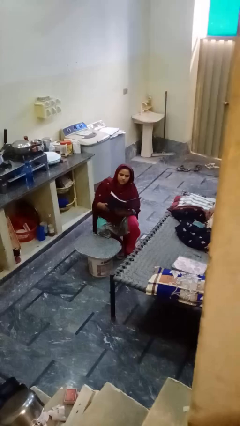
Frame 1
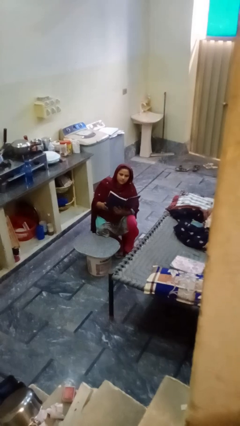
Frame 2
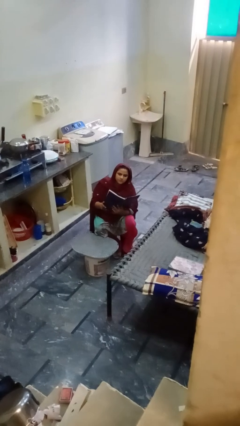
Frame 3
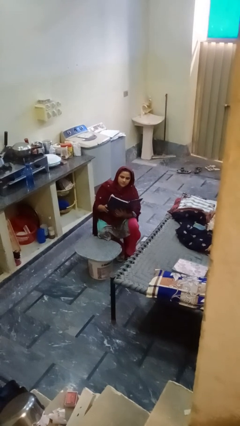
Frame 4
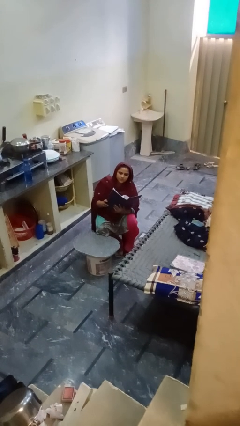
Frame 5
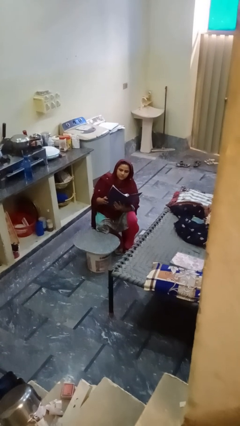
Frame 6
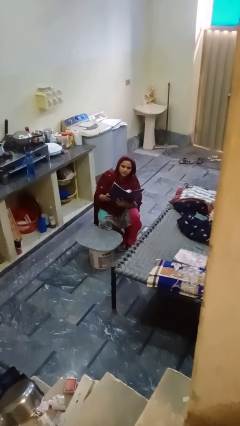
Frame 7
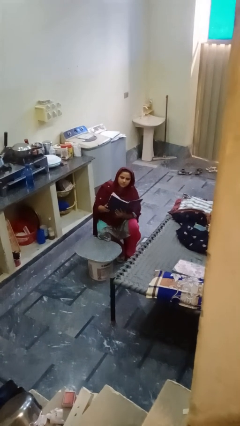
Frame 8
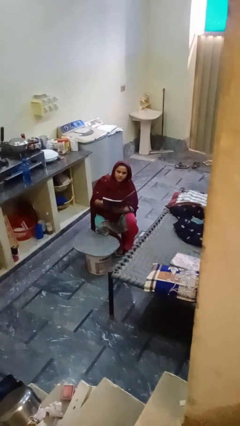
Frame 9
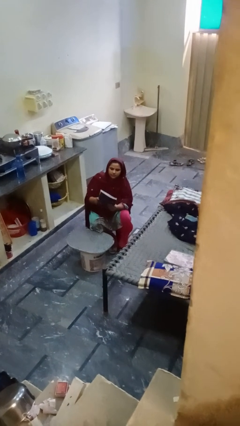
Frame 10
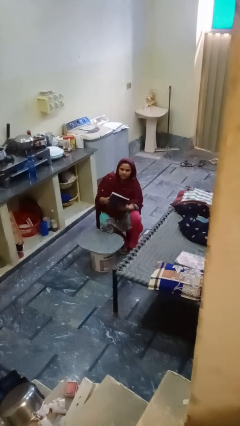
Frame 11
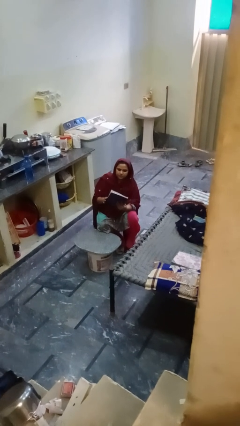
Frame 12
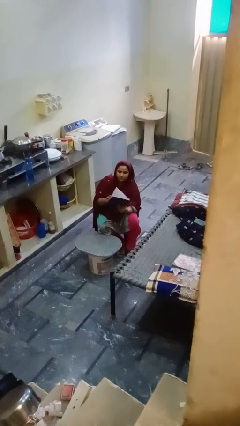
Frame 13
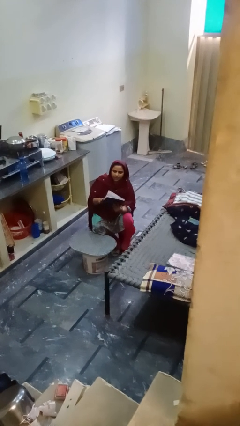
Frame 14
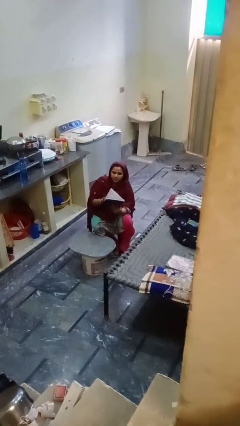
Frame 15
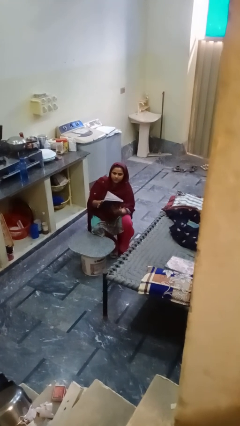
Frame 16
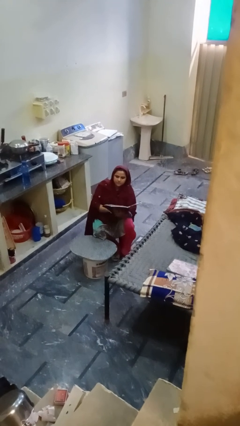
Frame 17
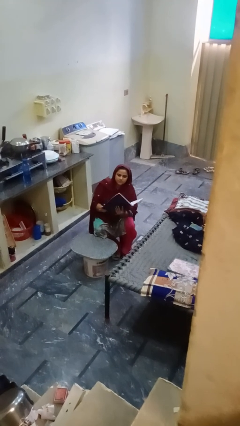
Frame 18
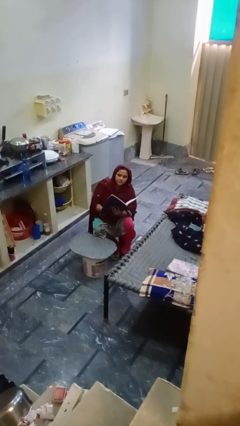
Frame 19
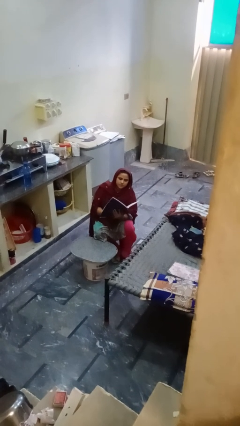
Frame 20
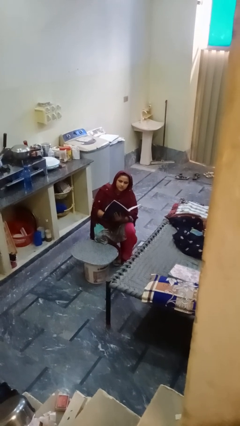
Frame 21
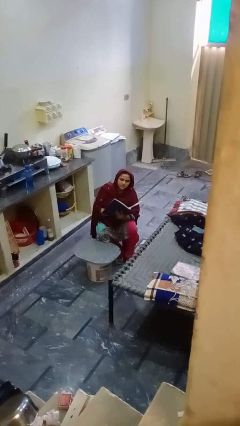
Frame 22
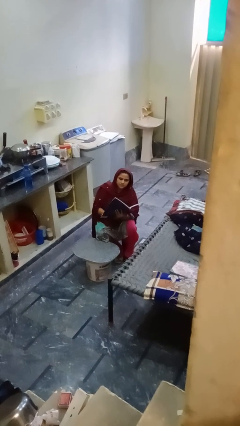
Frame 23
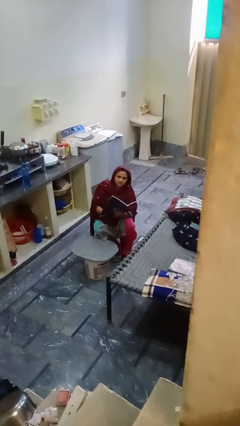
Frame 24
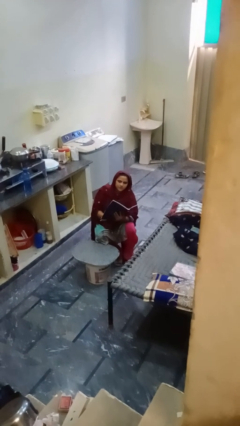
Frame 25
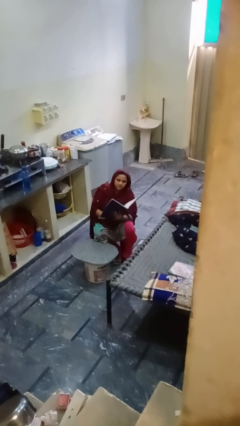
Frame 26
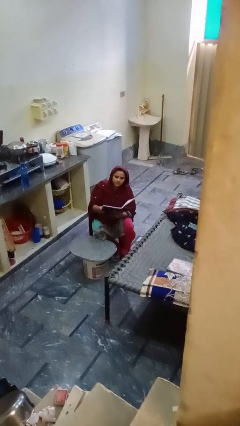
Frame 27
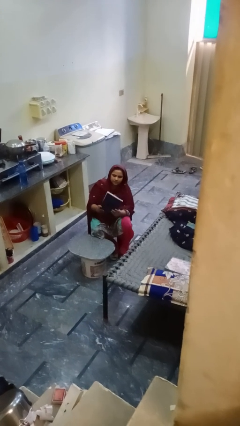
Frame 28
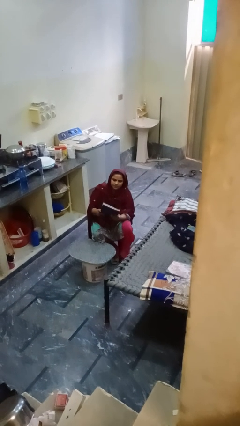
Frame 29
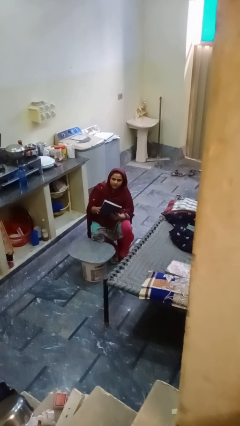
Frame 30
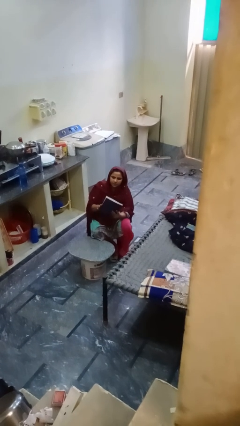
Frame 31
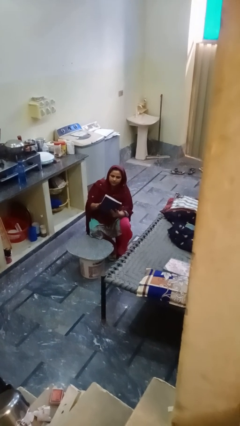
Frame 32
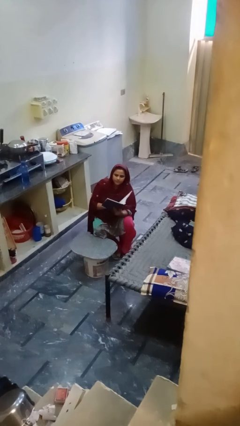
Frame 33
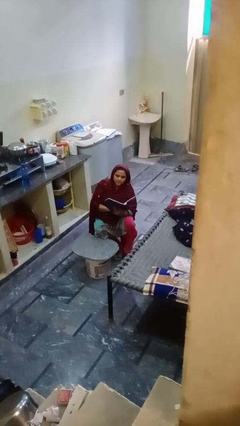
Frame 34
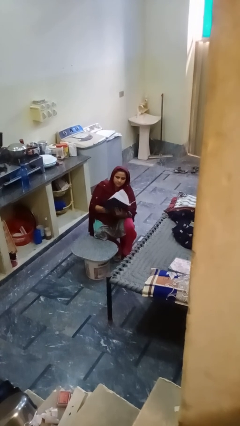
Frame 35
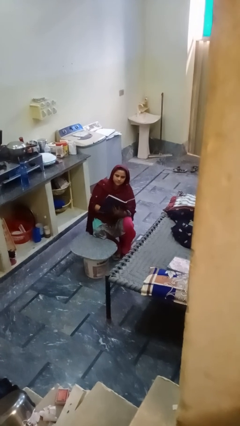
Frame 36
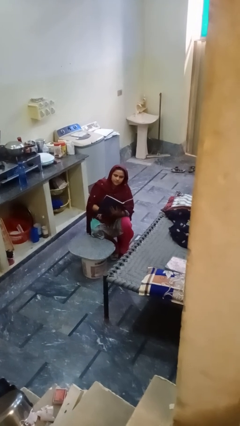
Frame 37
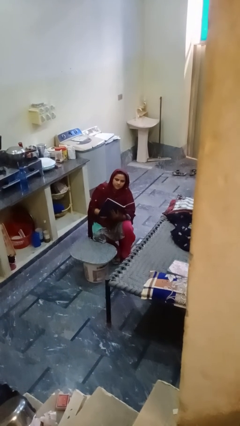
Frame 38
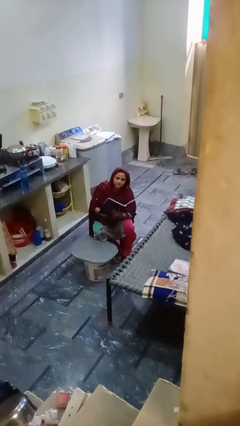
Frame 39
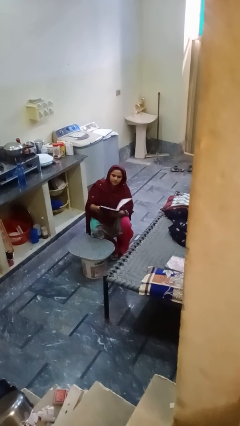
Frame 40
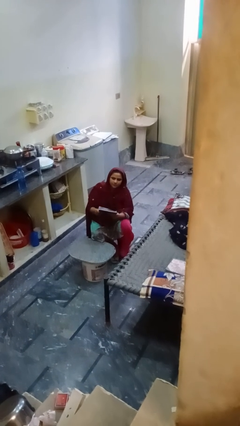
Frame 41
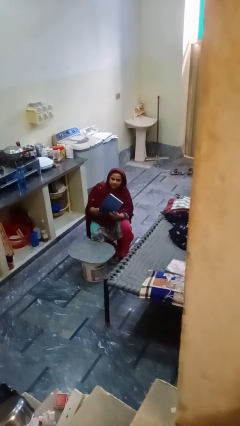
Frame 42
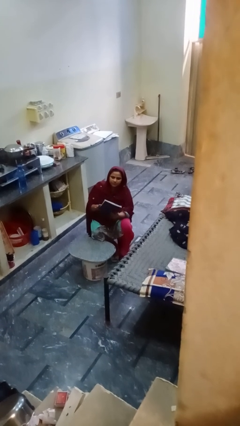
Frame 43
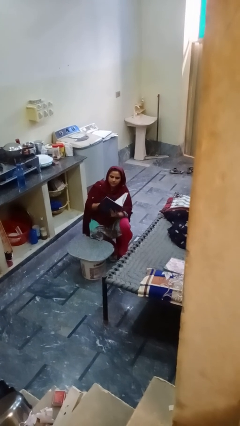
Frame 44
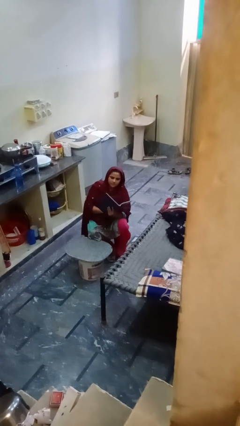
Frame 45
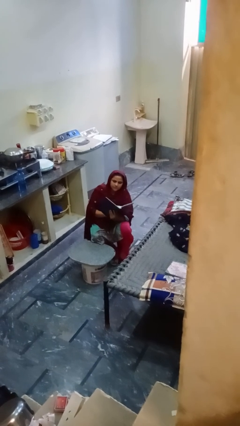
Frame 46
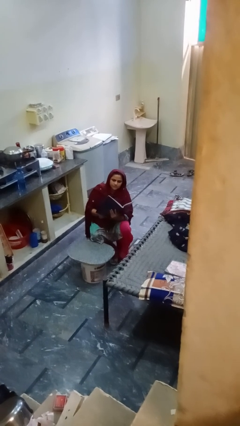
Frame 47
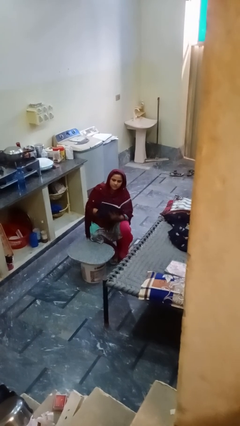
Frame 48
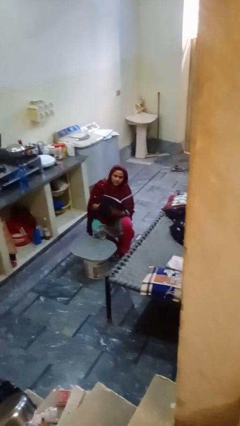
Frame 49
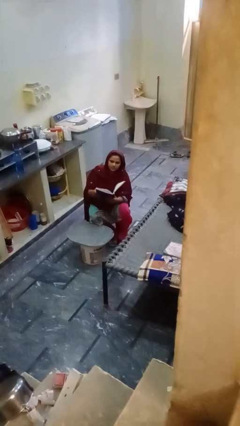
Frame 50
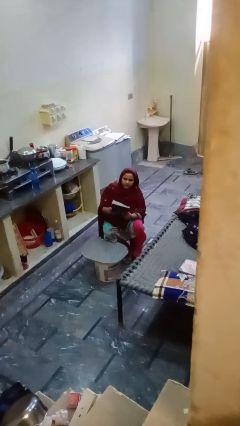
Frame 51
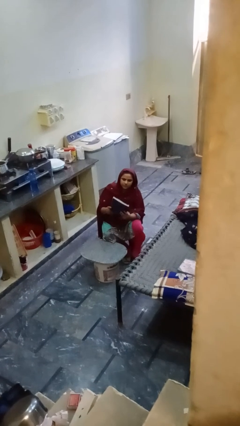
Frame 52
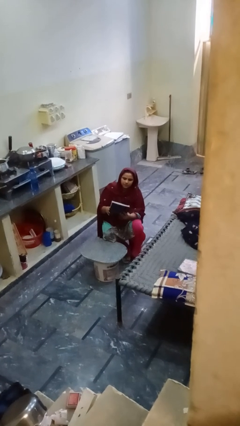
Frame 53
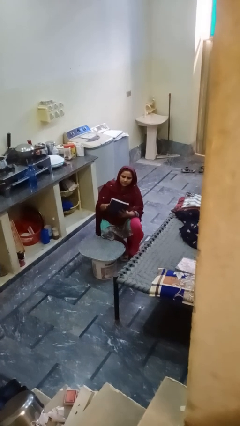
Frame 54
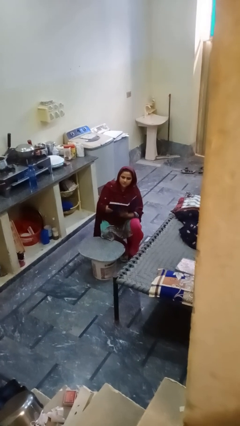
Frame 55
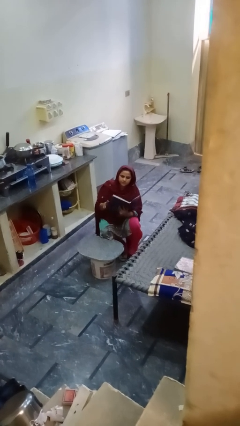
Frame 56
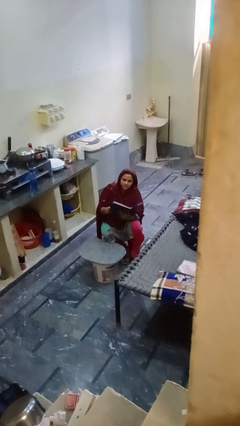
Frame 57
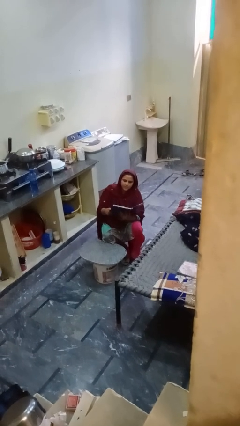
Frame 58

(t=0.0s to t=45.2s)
person reads magazine

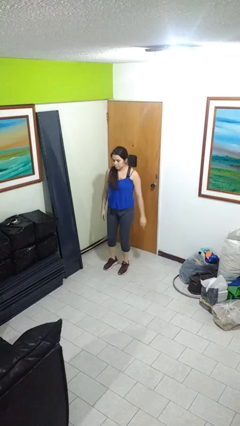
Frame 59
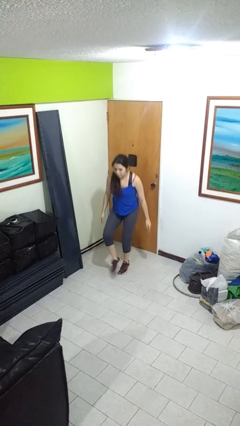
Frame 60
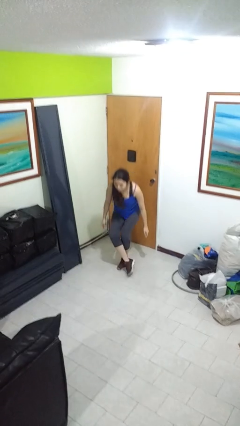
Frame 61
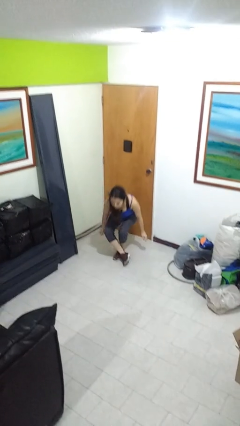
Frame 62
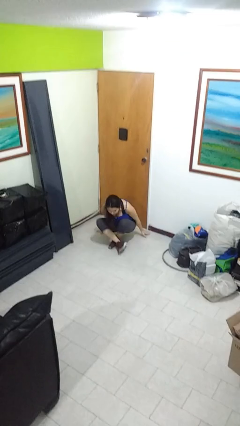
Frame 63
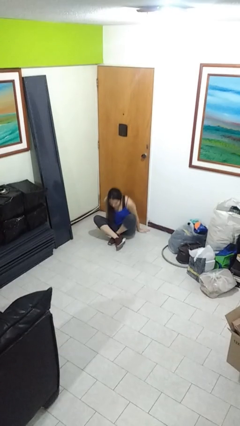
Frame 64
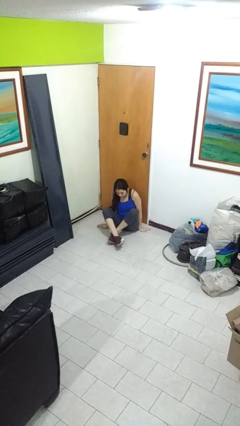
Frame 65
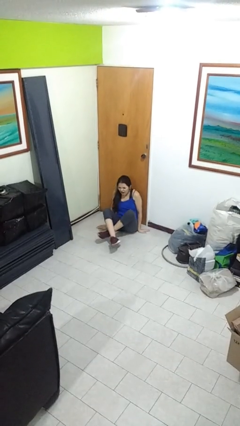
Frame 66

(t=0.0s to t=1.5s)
person sits crisscross

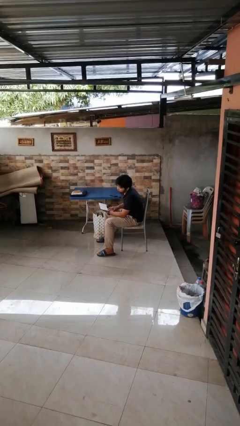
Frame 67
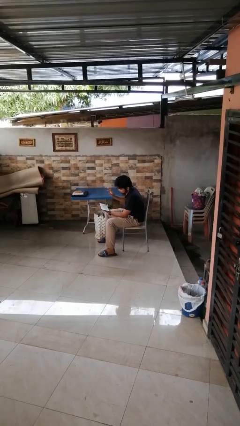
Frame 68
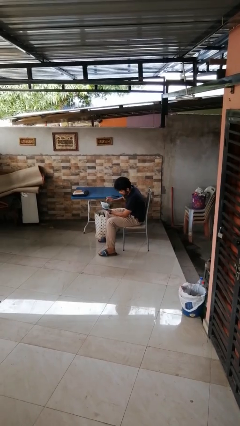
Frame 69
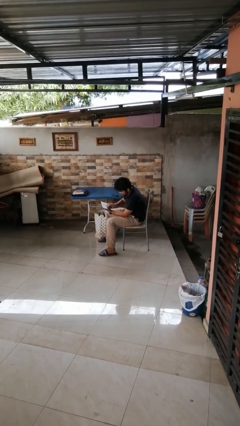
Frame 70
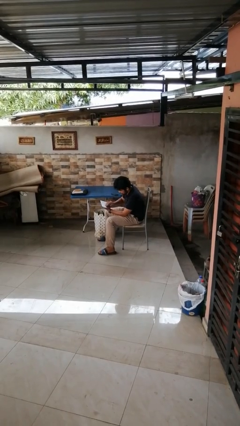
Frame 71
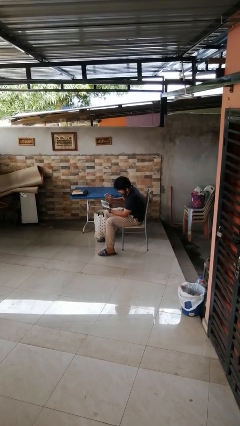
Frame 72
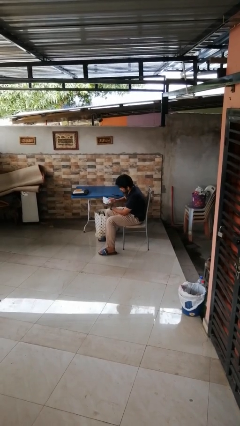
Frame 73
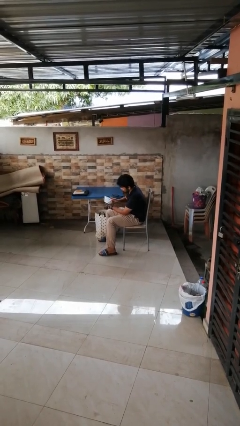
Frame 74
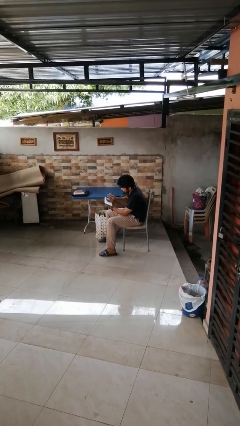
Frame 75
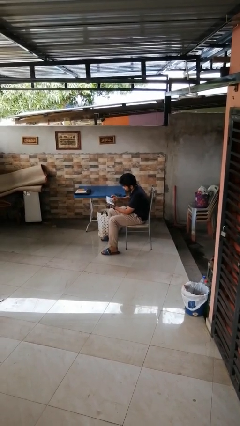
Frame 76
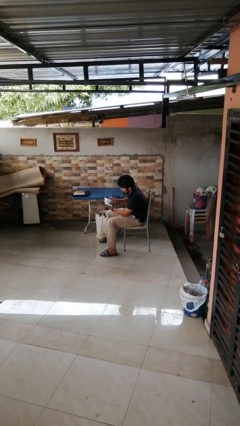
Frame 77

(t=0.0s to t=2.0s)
person interacts with tablet

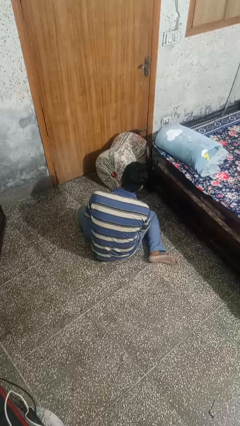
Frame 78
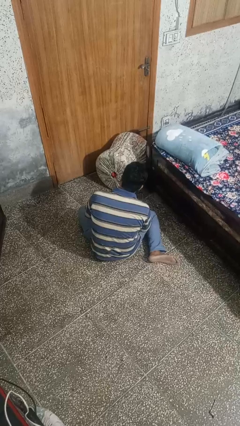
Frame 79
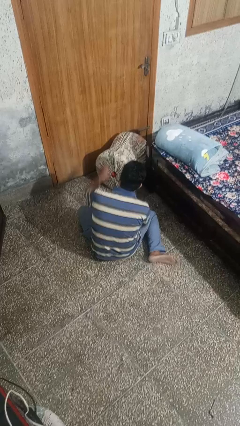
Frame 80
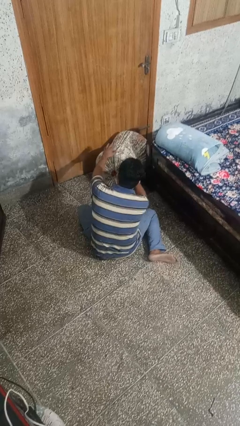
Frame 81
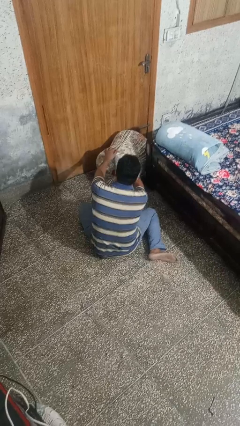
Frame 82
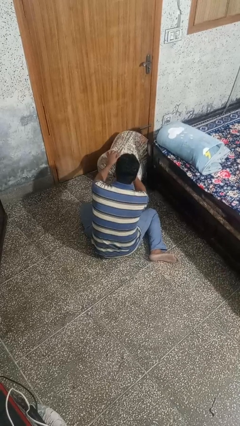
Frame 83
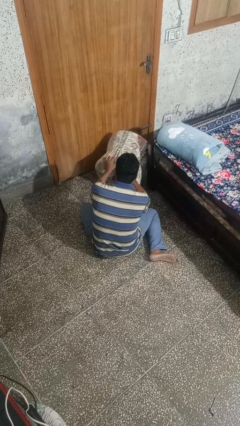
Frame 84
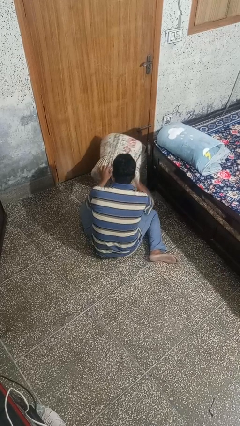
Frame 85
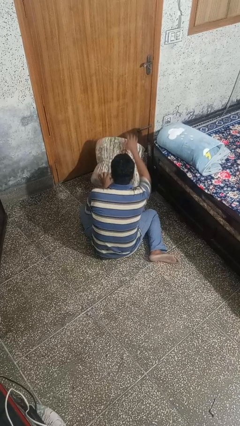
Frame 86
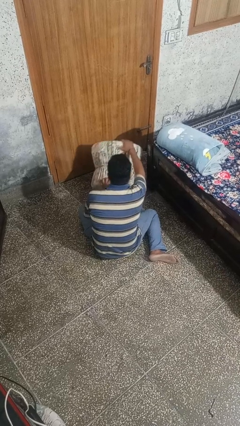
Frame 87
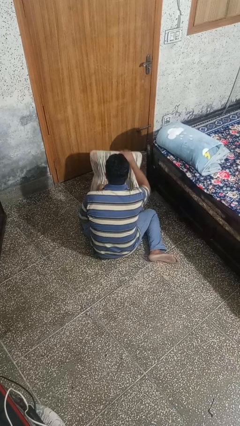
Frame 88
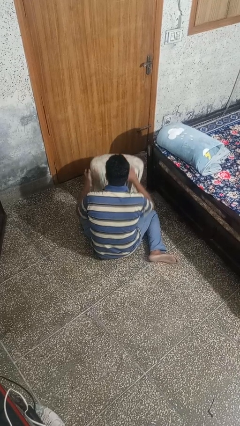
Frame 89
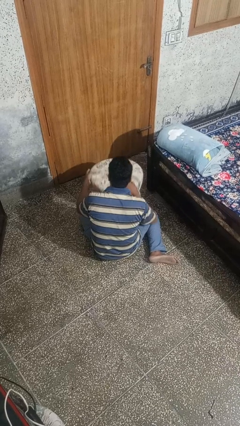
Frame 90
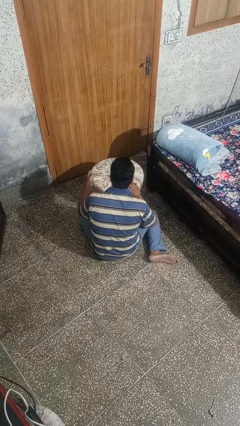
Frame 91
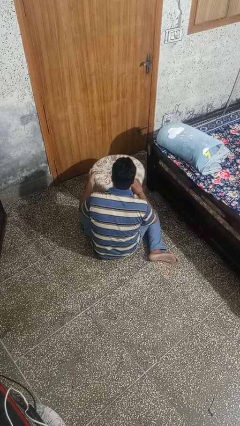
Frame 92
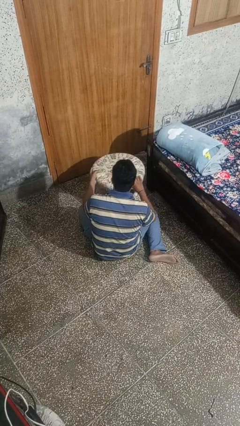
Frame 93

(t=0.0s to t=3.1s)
person sets upright furniture
